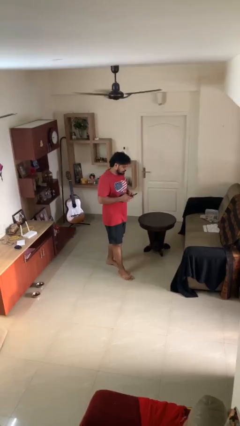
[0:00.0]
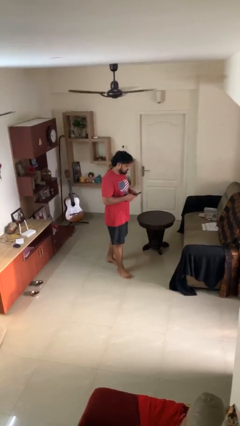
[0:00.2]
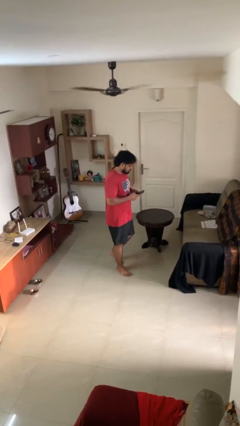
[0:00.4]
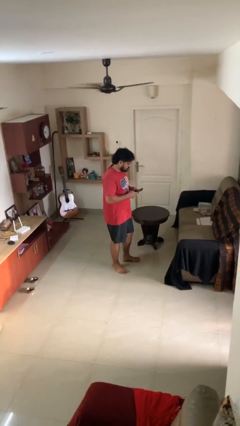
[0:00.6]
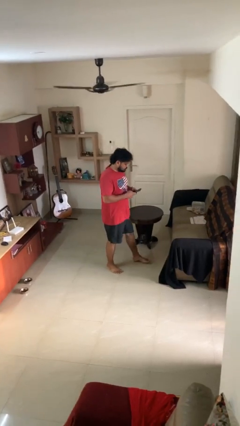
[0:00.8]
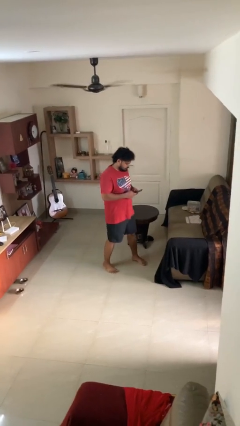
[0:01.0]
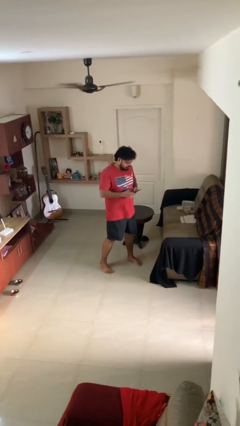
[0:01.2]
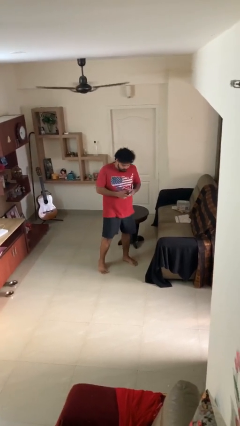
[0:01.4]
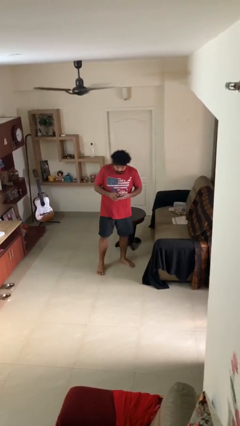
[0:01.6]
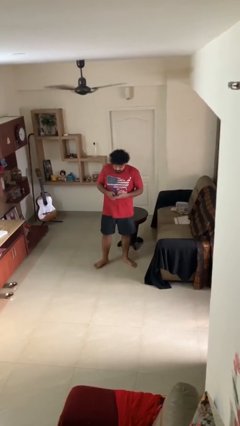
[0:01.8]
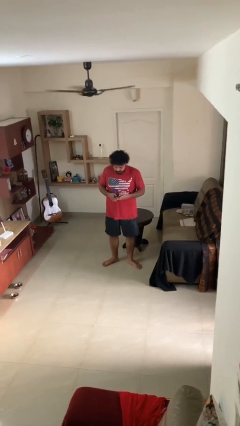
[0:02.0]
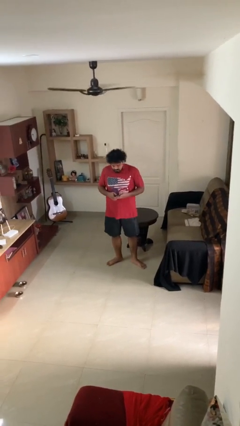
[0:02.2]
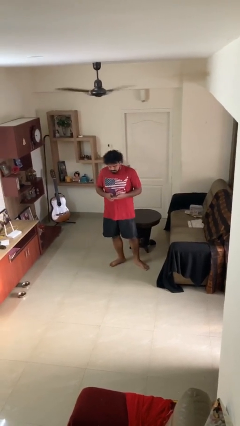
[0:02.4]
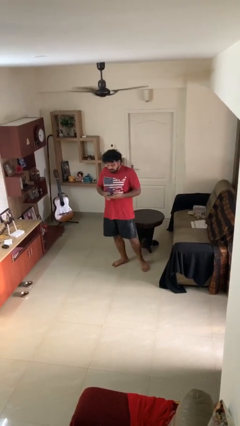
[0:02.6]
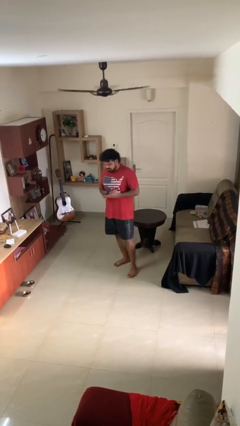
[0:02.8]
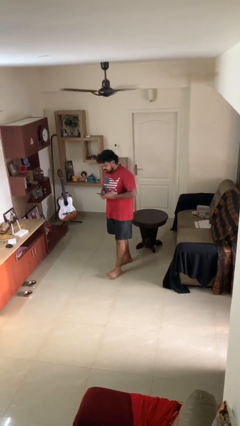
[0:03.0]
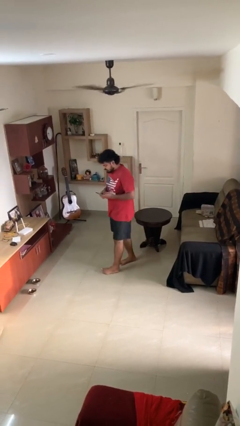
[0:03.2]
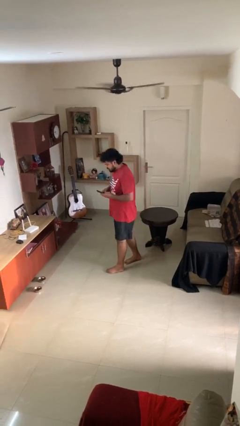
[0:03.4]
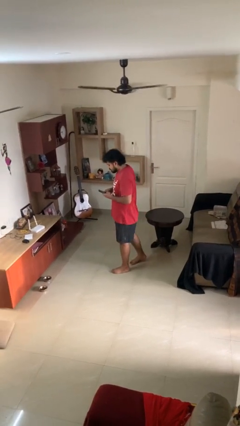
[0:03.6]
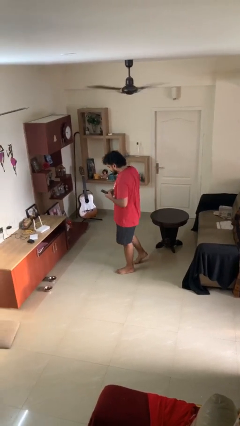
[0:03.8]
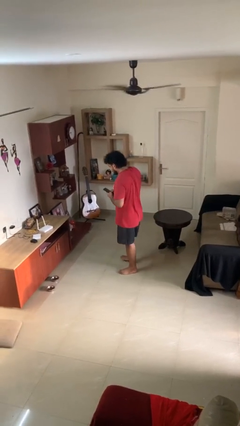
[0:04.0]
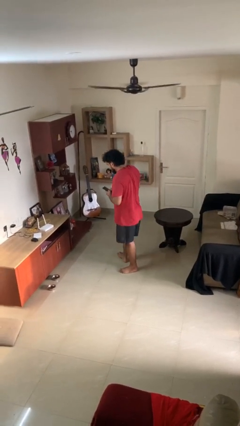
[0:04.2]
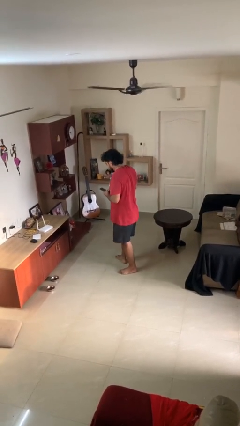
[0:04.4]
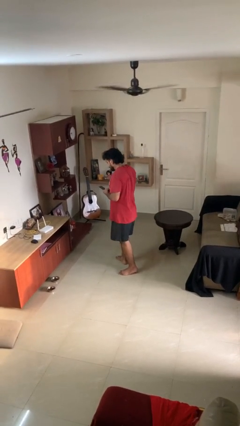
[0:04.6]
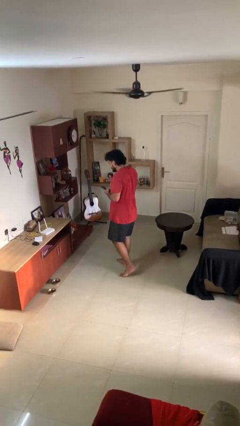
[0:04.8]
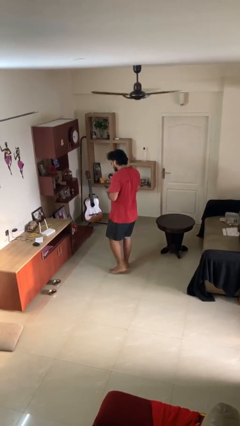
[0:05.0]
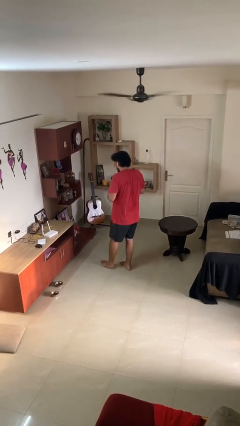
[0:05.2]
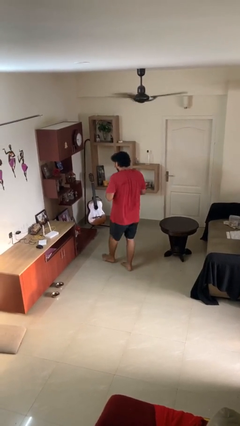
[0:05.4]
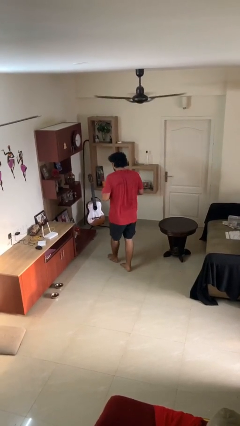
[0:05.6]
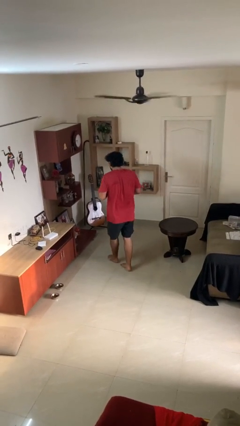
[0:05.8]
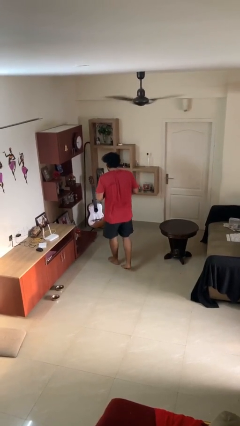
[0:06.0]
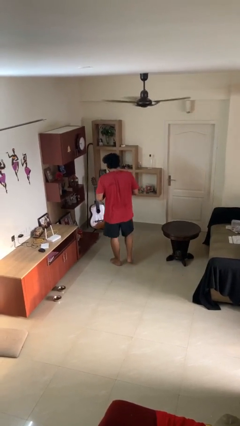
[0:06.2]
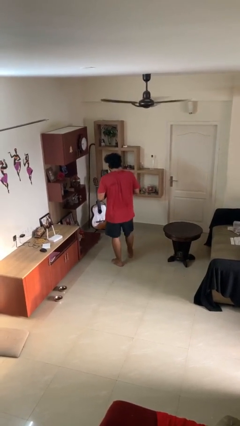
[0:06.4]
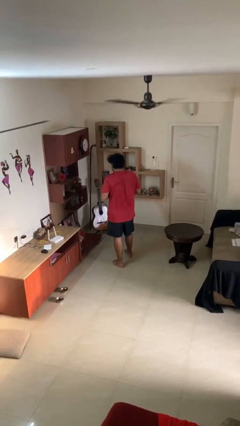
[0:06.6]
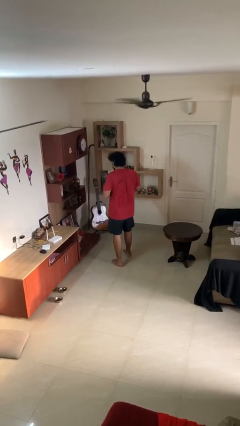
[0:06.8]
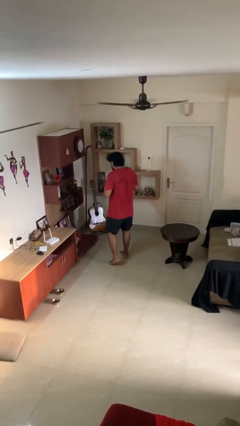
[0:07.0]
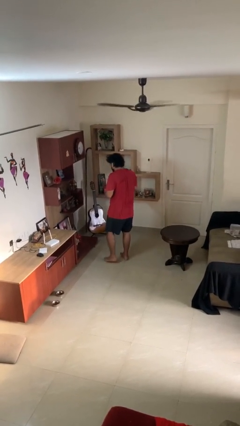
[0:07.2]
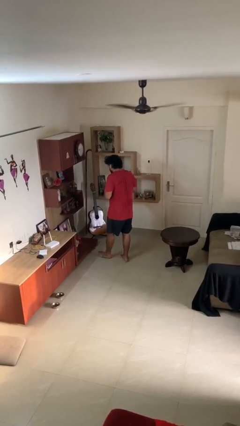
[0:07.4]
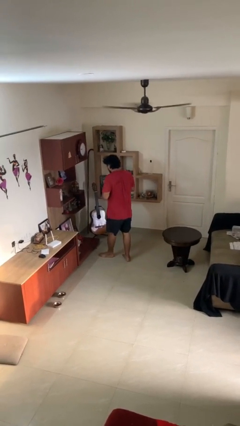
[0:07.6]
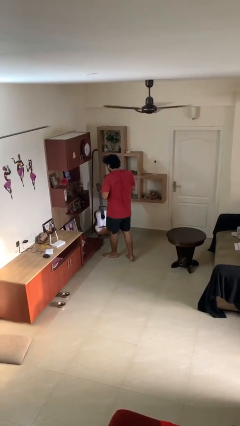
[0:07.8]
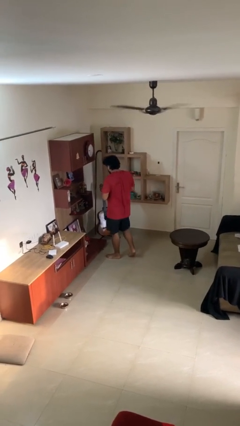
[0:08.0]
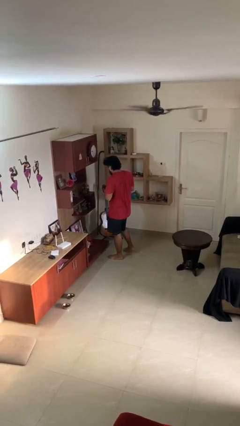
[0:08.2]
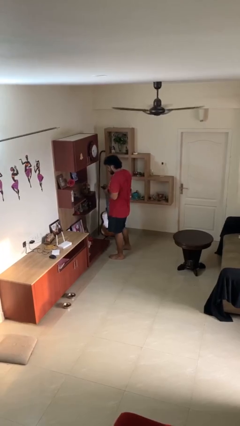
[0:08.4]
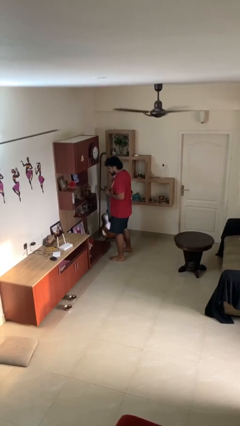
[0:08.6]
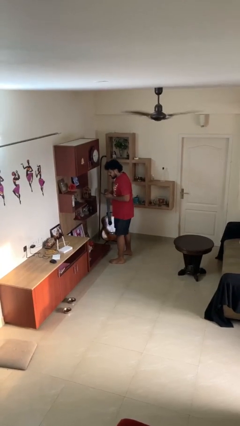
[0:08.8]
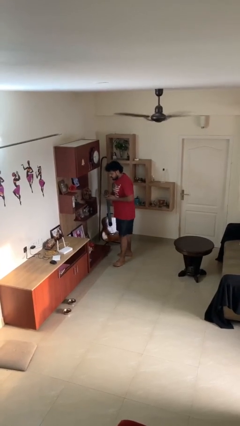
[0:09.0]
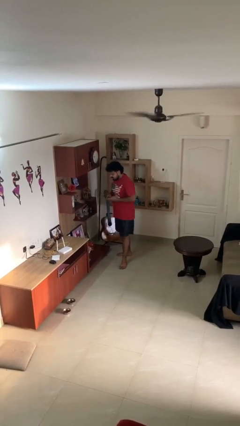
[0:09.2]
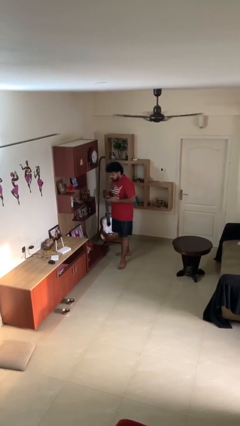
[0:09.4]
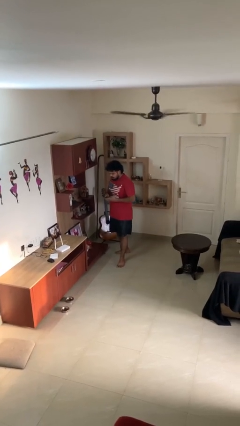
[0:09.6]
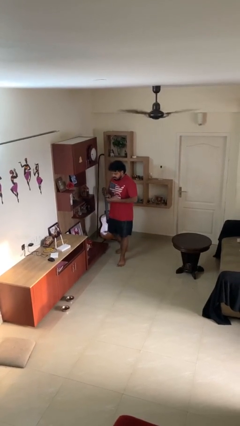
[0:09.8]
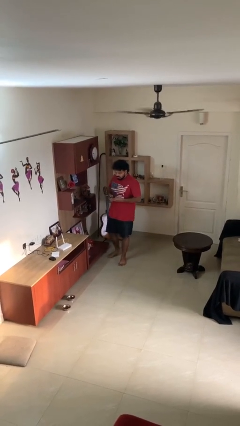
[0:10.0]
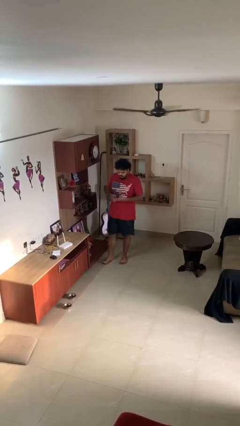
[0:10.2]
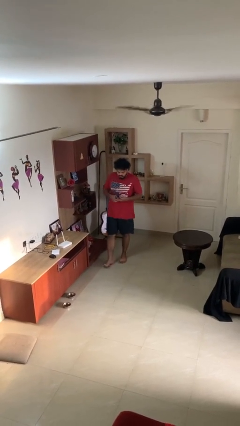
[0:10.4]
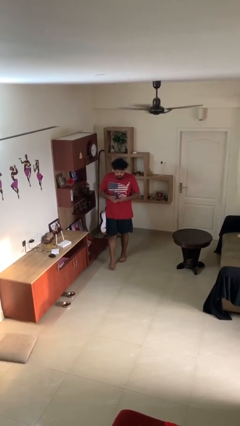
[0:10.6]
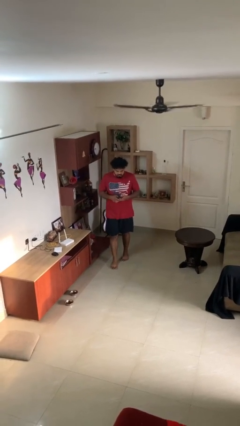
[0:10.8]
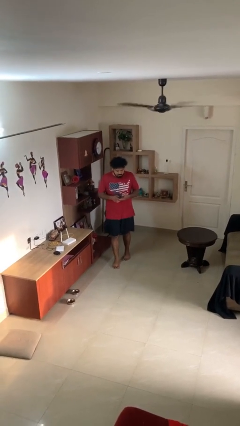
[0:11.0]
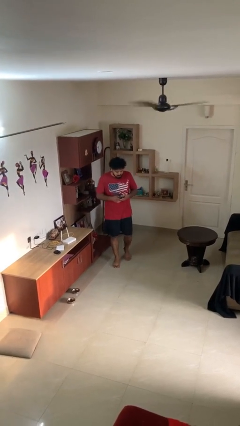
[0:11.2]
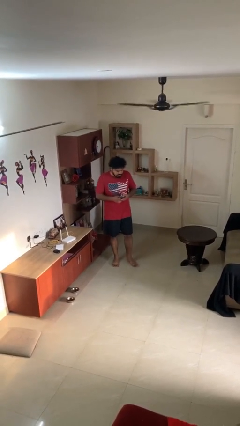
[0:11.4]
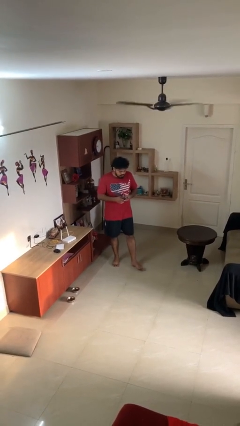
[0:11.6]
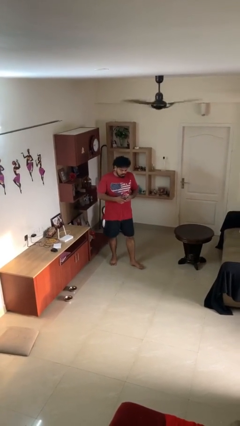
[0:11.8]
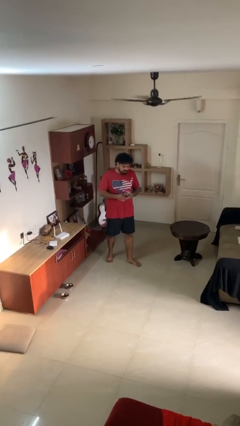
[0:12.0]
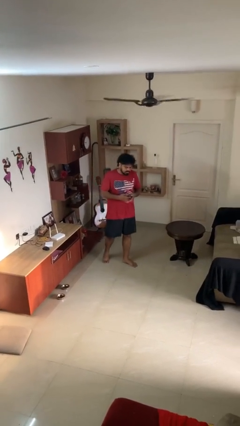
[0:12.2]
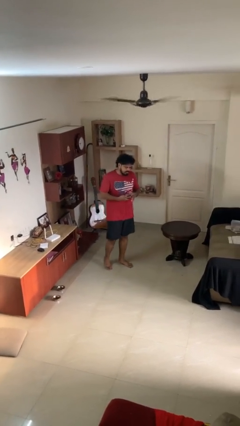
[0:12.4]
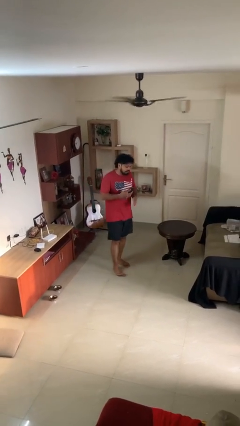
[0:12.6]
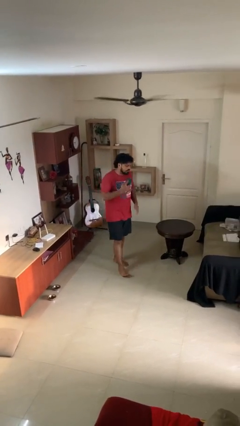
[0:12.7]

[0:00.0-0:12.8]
person texts on phone

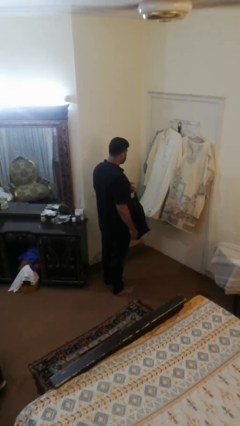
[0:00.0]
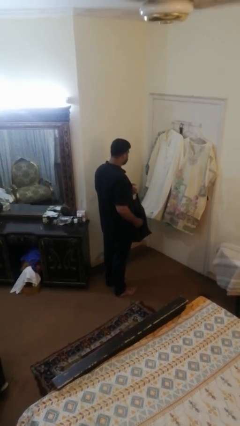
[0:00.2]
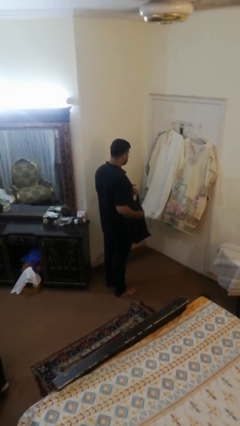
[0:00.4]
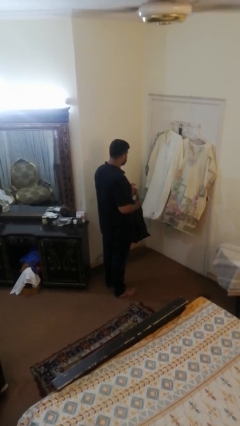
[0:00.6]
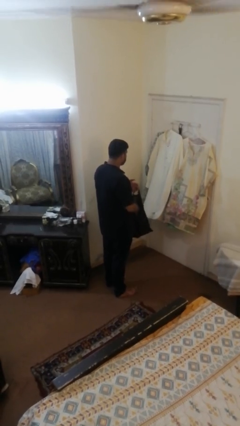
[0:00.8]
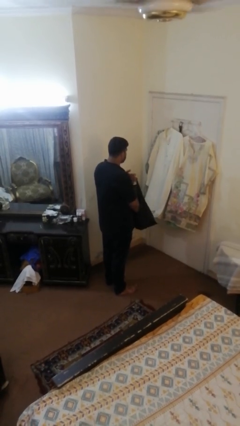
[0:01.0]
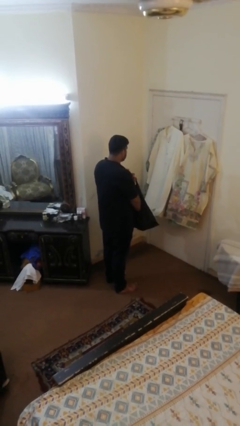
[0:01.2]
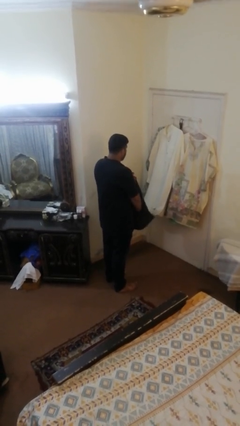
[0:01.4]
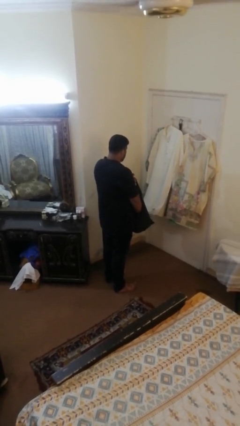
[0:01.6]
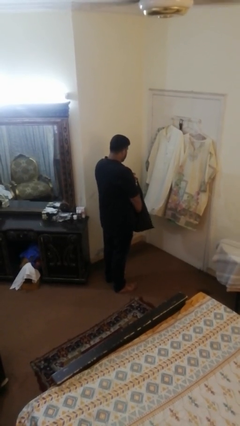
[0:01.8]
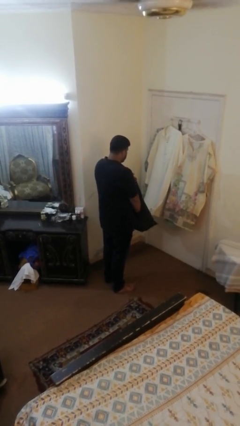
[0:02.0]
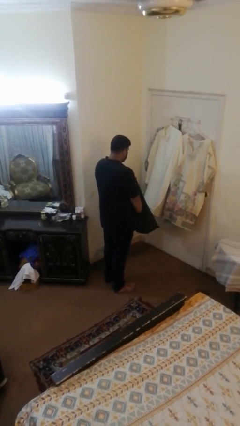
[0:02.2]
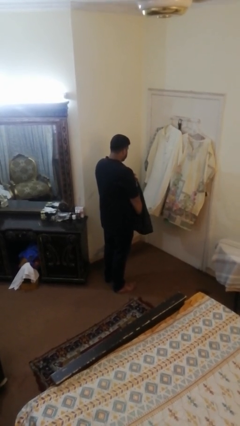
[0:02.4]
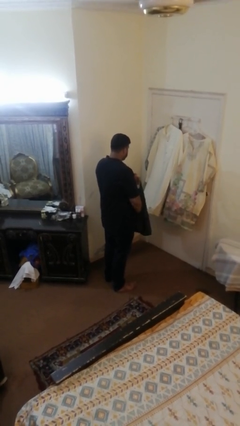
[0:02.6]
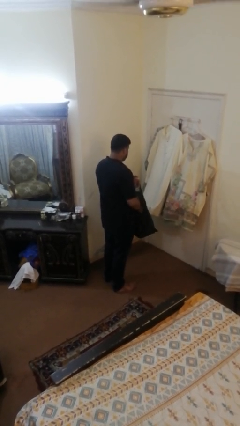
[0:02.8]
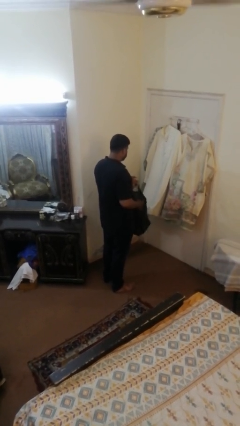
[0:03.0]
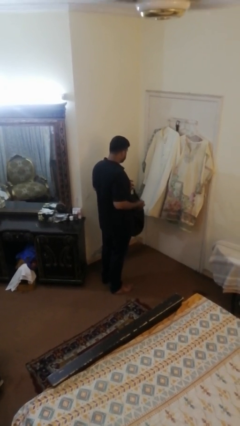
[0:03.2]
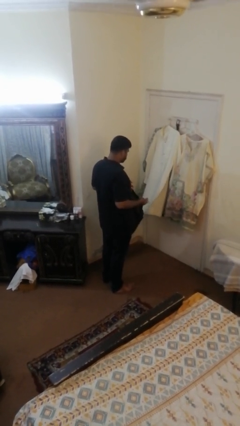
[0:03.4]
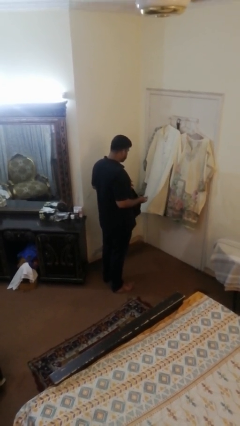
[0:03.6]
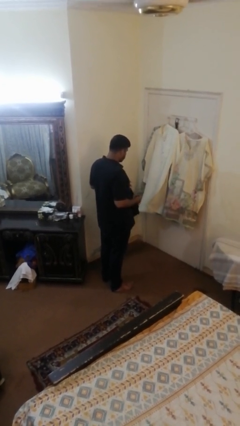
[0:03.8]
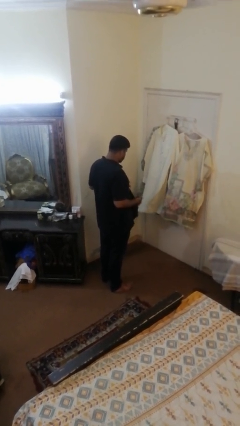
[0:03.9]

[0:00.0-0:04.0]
person takes object from bag

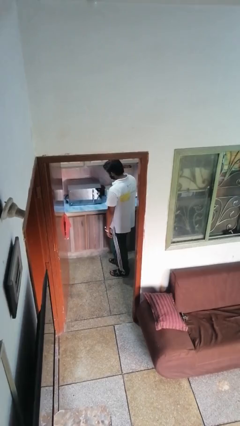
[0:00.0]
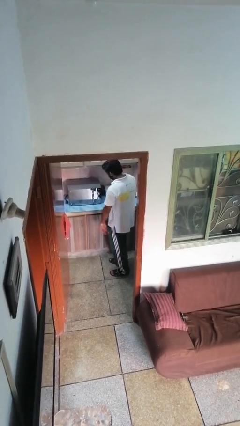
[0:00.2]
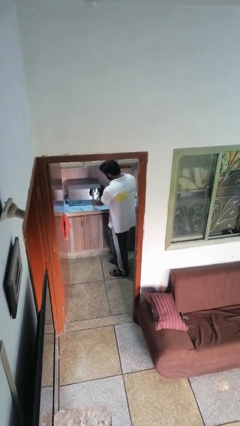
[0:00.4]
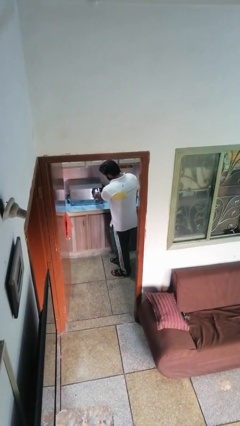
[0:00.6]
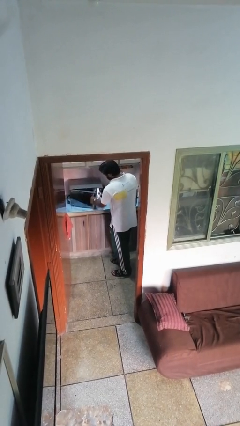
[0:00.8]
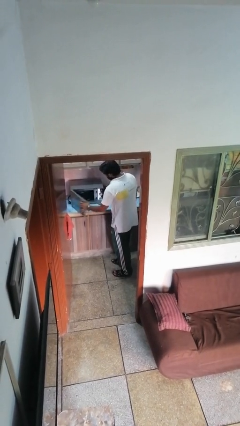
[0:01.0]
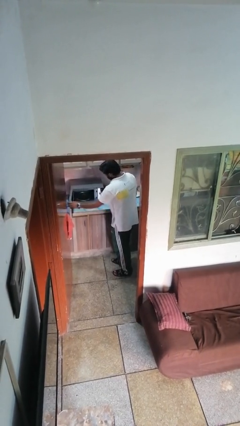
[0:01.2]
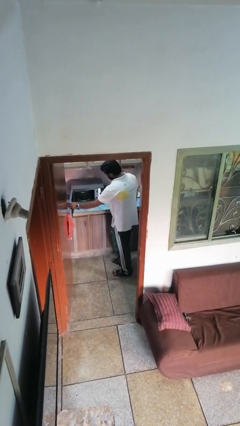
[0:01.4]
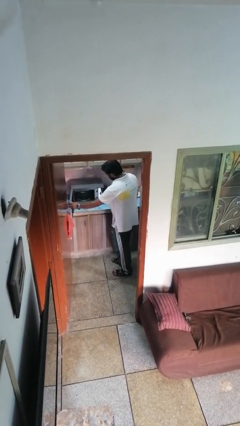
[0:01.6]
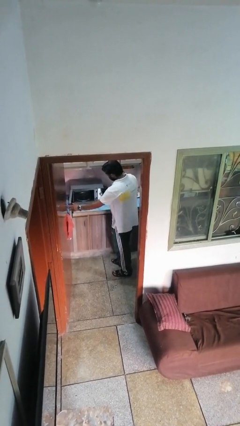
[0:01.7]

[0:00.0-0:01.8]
person opens microwave
